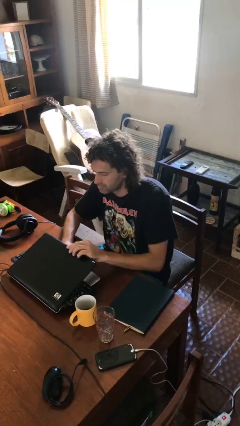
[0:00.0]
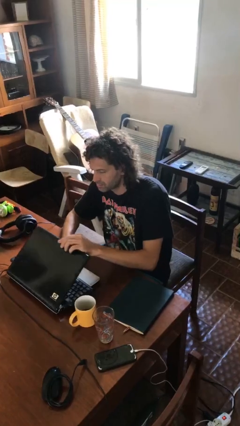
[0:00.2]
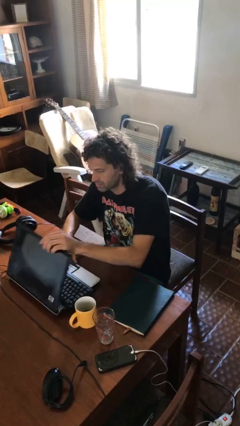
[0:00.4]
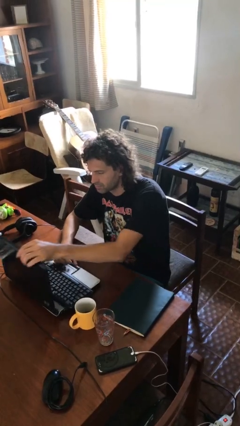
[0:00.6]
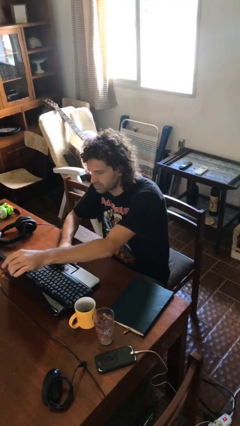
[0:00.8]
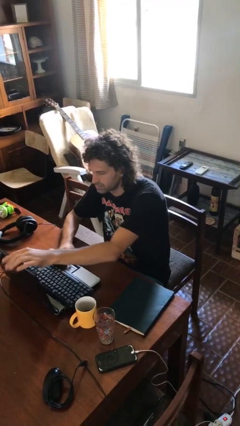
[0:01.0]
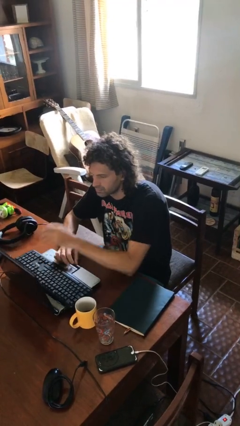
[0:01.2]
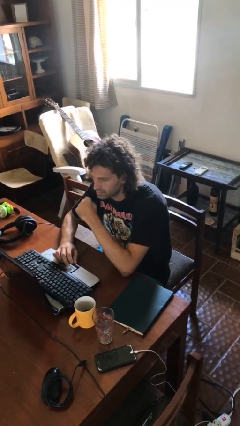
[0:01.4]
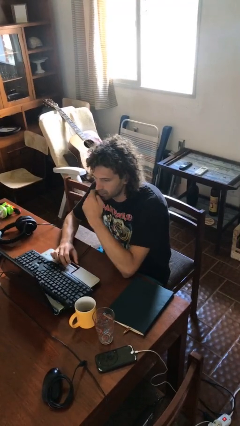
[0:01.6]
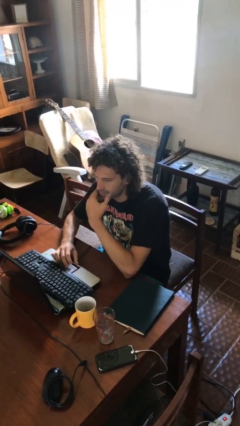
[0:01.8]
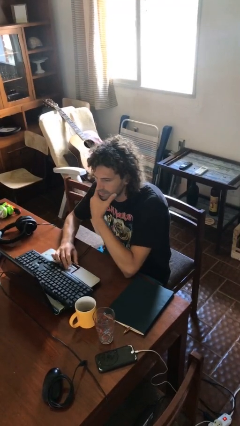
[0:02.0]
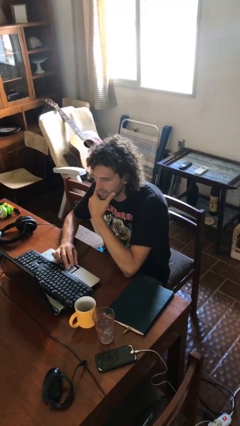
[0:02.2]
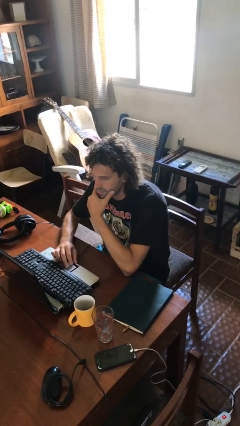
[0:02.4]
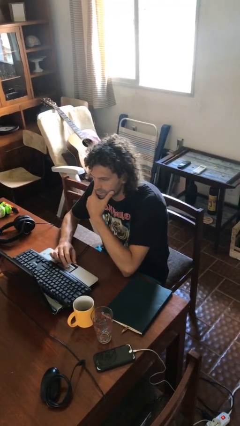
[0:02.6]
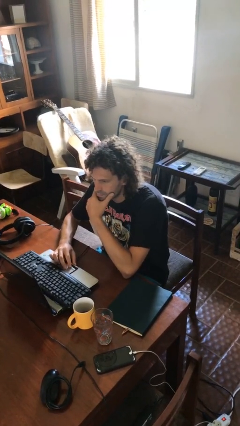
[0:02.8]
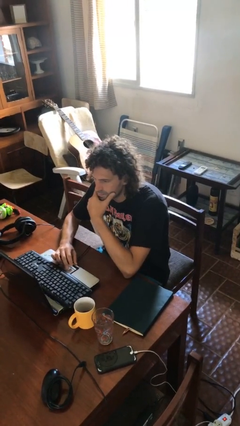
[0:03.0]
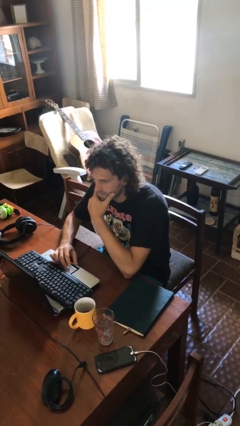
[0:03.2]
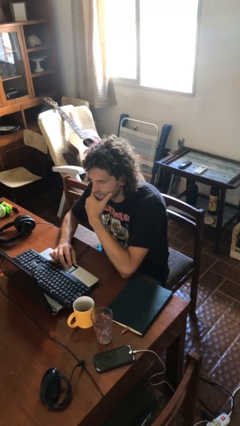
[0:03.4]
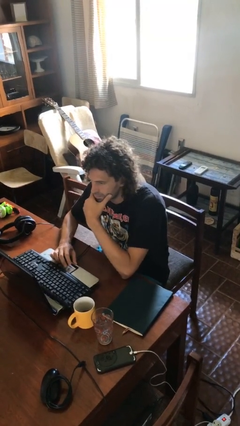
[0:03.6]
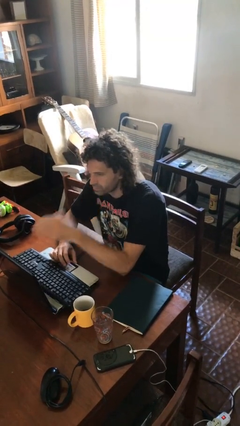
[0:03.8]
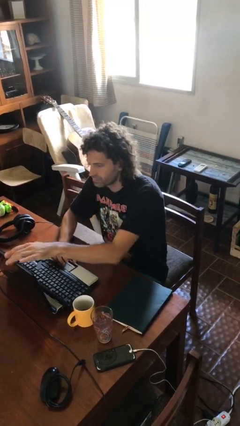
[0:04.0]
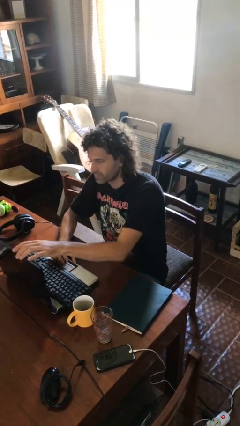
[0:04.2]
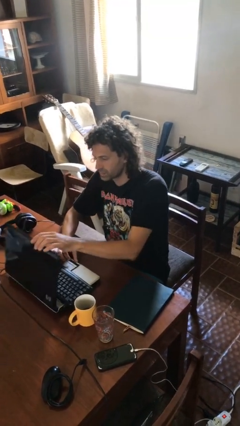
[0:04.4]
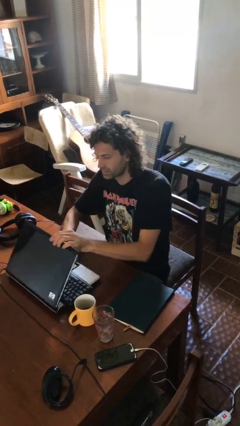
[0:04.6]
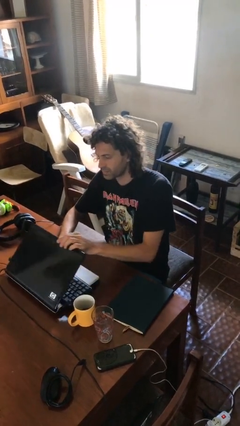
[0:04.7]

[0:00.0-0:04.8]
person interacts with laptop

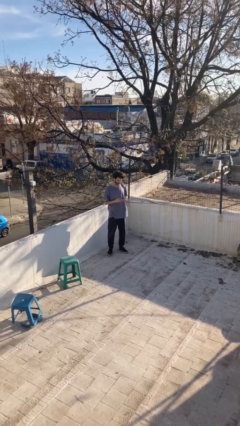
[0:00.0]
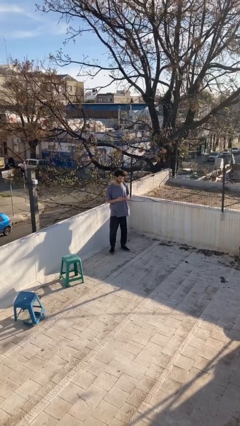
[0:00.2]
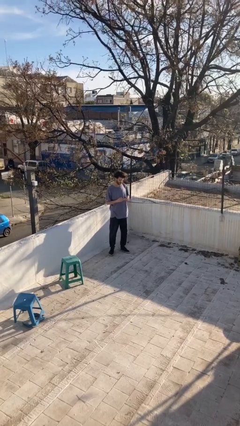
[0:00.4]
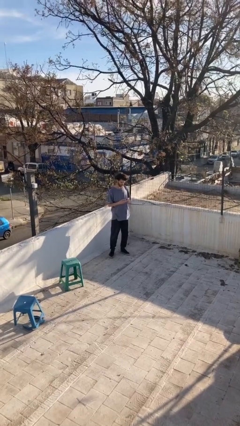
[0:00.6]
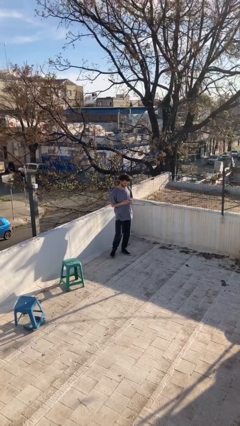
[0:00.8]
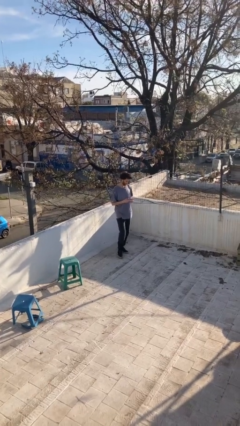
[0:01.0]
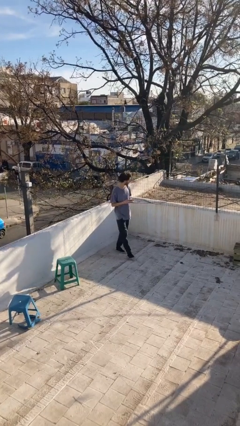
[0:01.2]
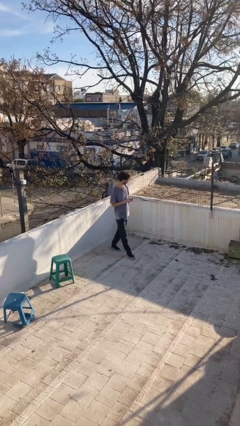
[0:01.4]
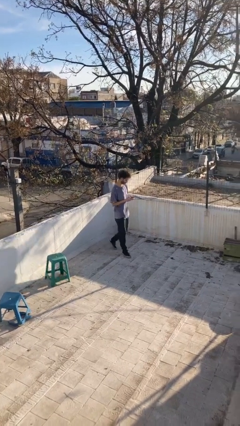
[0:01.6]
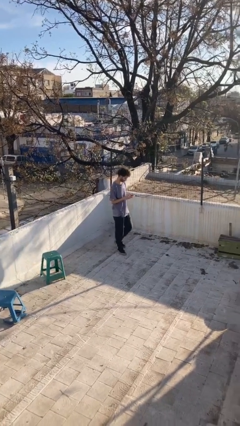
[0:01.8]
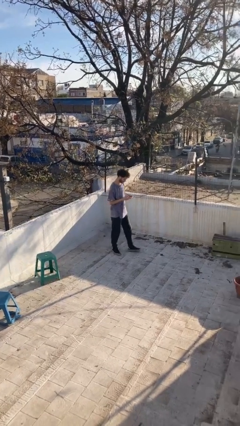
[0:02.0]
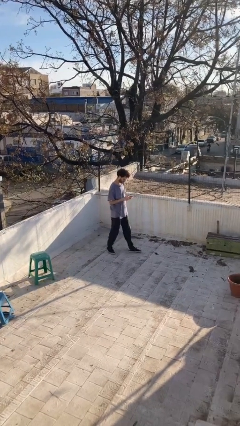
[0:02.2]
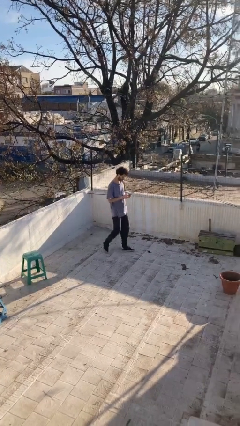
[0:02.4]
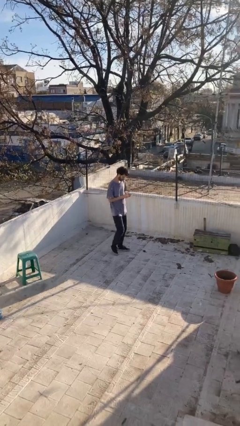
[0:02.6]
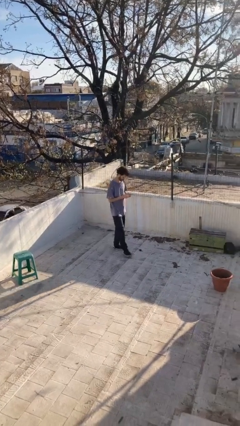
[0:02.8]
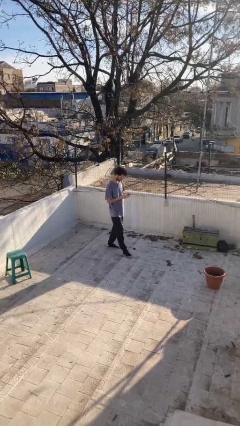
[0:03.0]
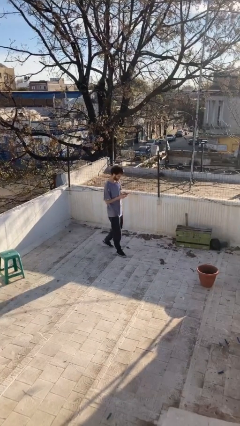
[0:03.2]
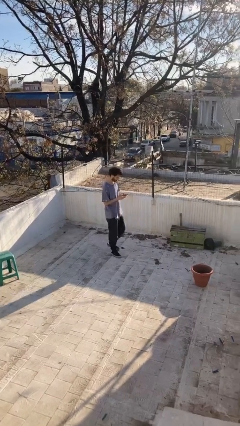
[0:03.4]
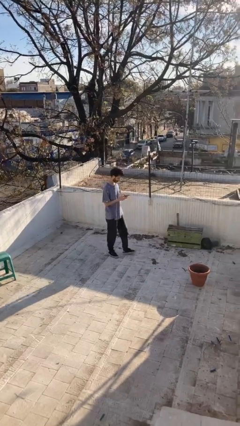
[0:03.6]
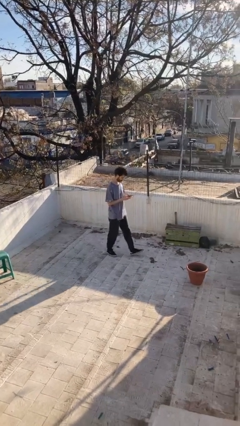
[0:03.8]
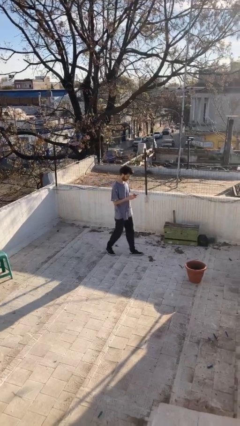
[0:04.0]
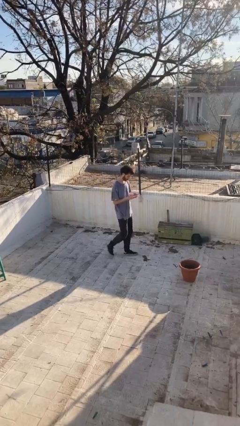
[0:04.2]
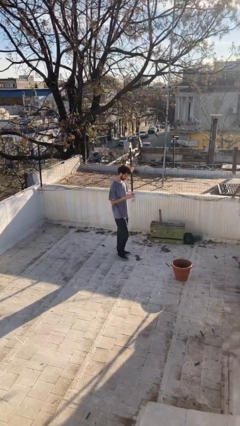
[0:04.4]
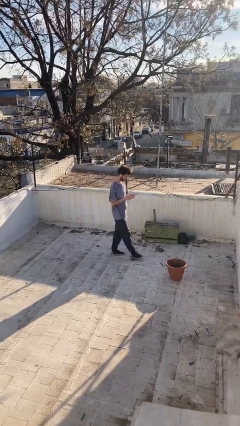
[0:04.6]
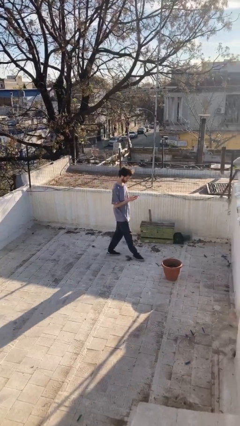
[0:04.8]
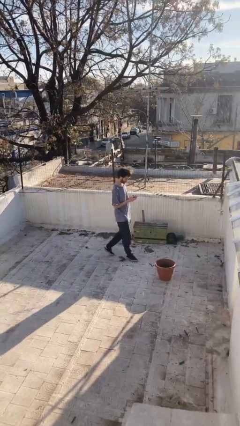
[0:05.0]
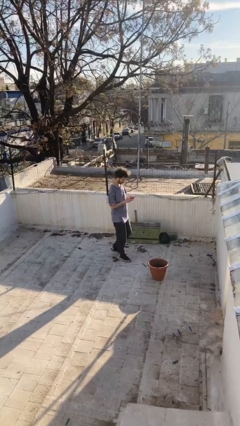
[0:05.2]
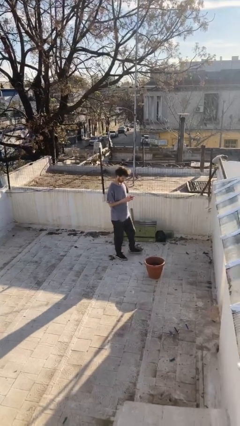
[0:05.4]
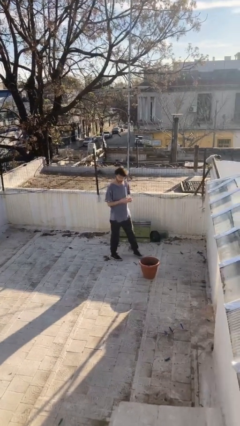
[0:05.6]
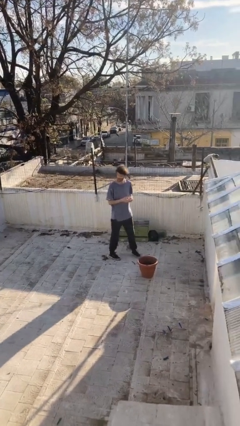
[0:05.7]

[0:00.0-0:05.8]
person texts on phone

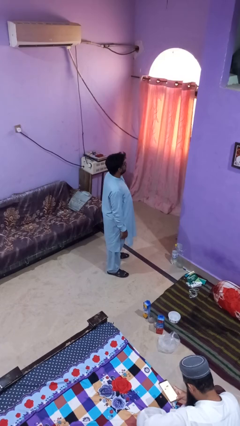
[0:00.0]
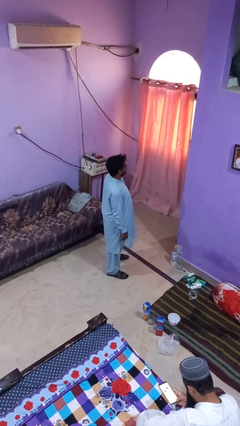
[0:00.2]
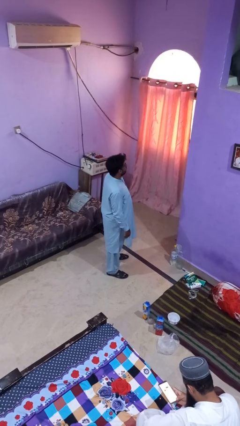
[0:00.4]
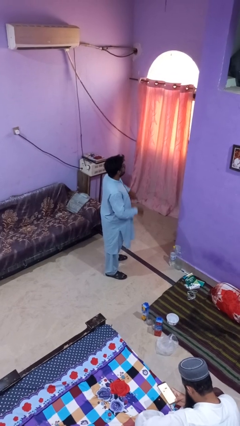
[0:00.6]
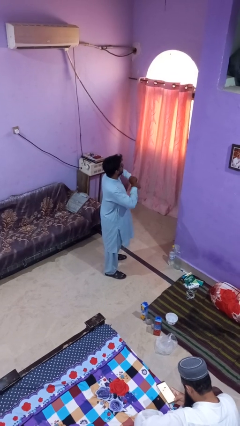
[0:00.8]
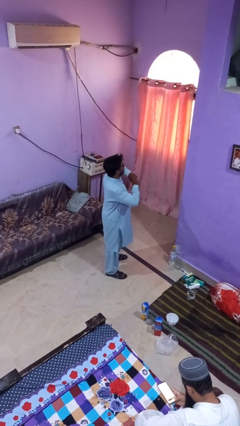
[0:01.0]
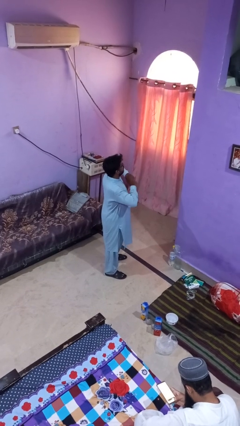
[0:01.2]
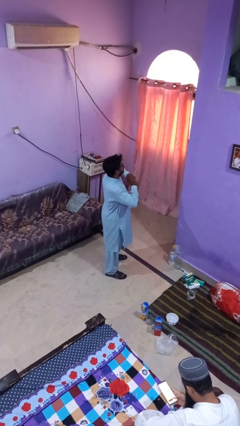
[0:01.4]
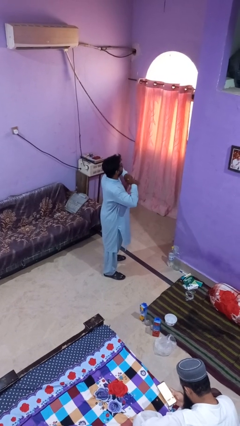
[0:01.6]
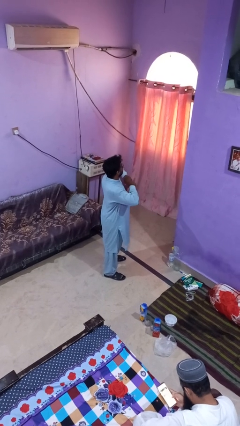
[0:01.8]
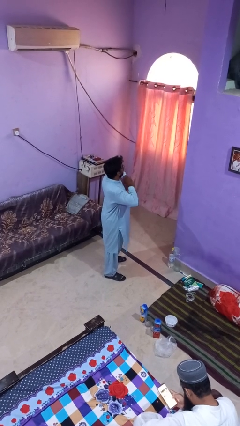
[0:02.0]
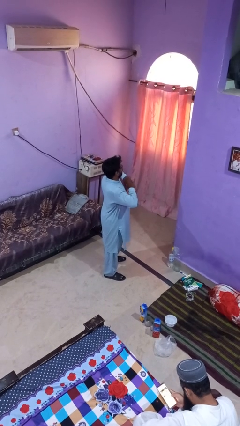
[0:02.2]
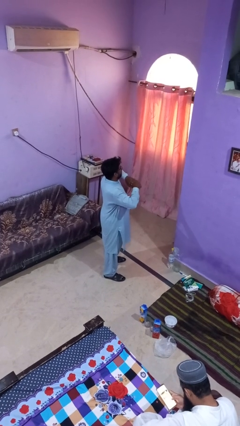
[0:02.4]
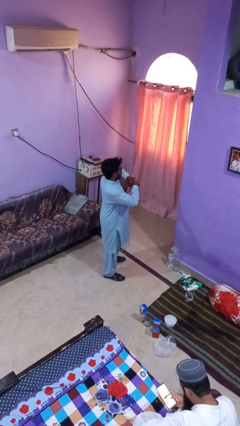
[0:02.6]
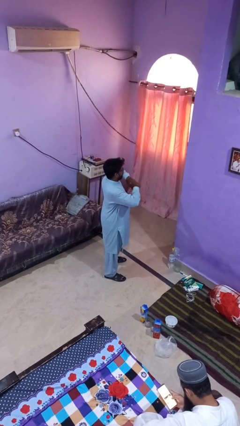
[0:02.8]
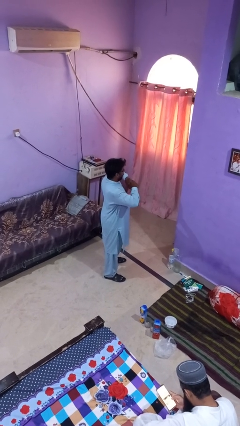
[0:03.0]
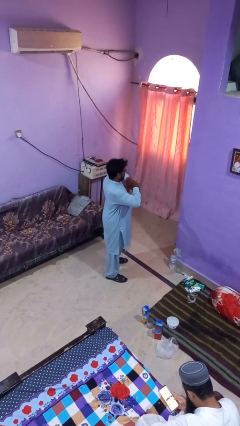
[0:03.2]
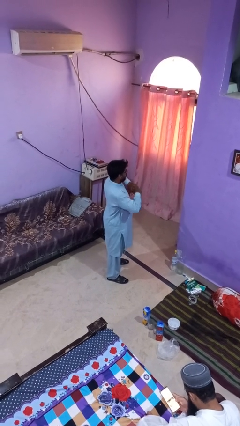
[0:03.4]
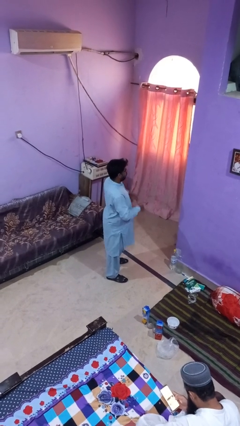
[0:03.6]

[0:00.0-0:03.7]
person cracks knuckles

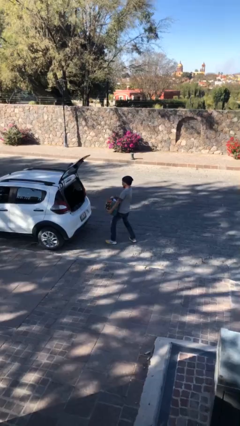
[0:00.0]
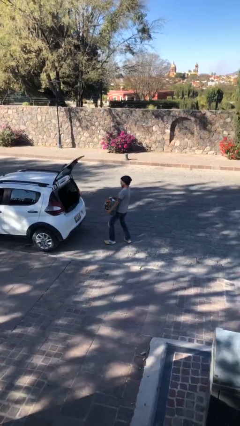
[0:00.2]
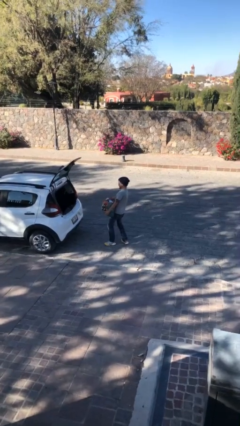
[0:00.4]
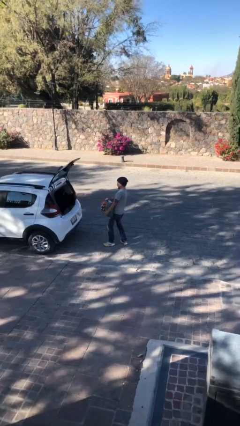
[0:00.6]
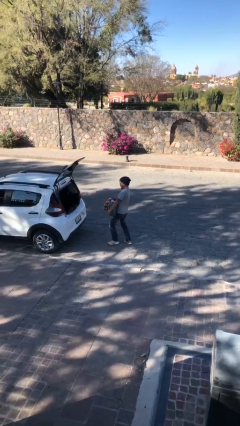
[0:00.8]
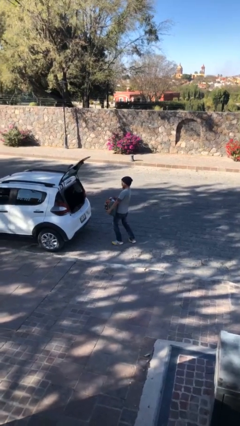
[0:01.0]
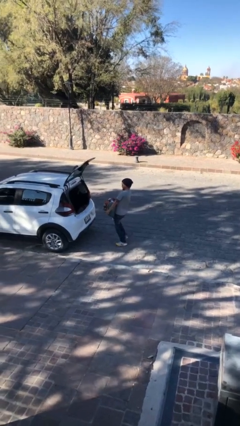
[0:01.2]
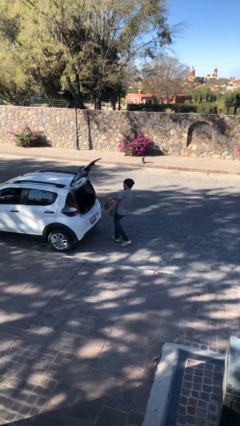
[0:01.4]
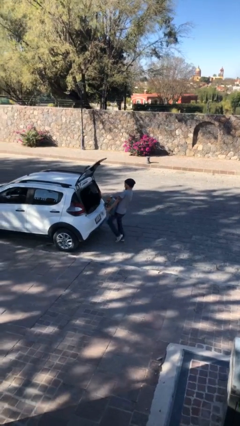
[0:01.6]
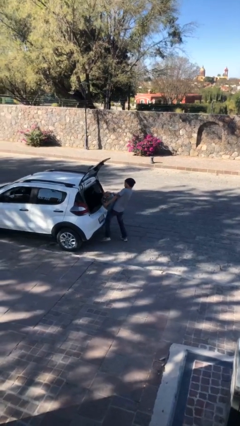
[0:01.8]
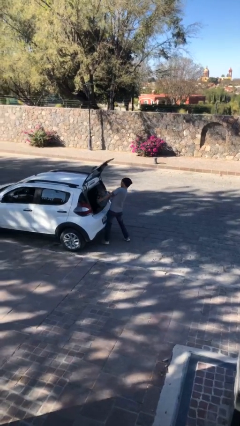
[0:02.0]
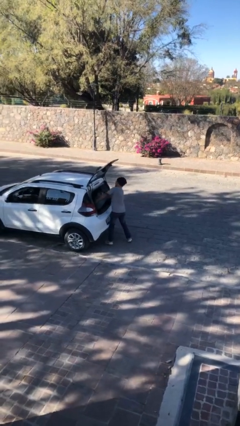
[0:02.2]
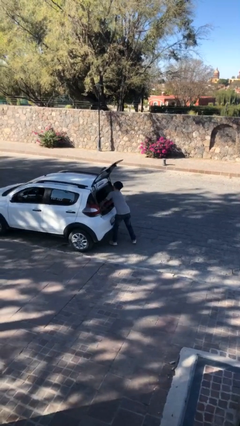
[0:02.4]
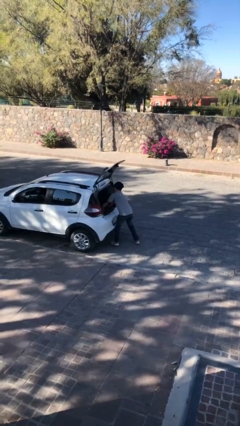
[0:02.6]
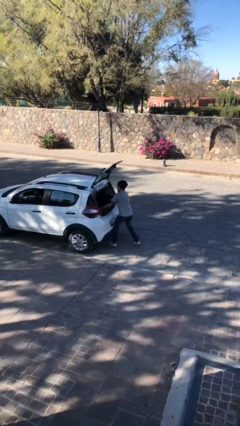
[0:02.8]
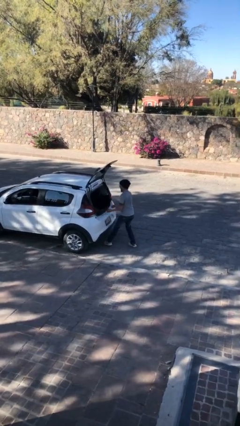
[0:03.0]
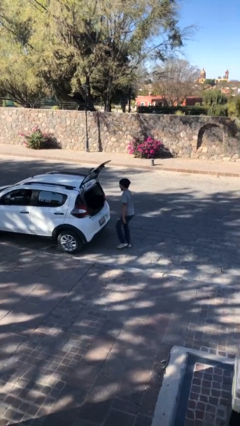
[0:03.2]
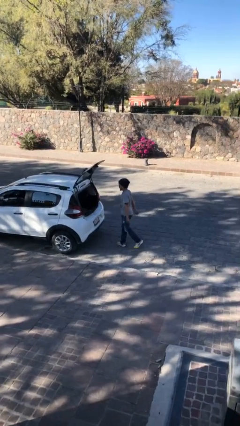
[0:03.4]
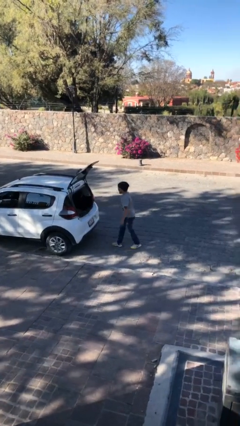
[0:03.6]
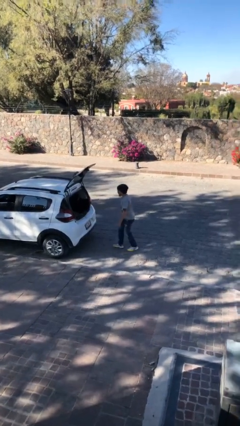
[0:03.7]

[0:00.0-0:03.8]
person loads car
